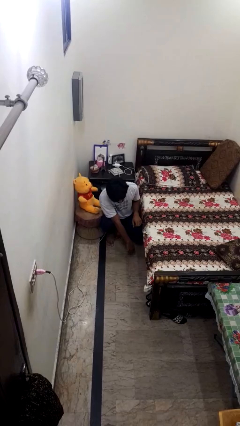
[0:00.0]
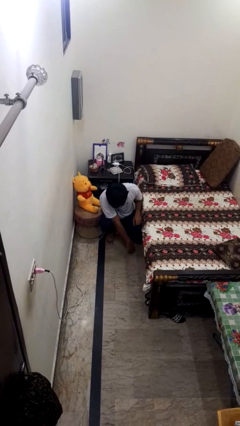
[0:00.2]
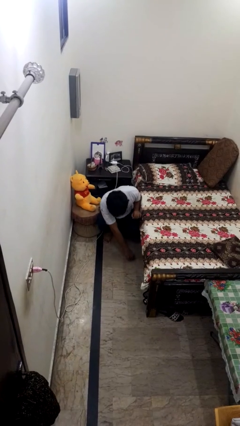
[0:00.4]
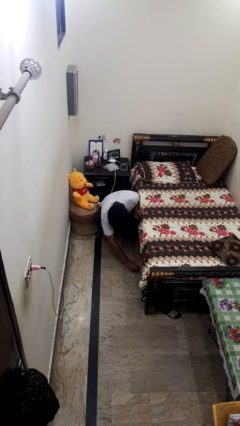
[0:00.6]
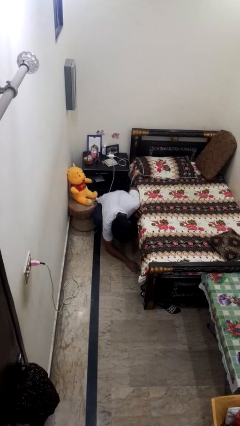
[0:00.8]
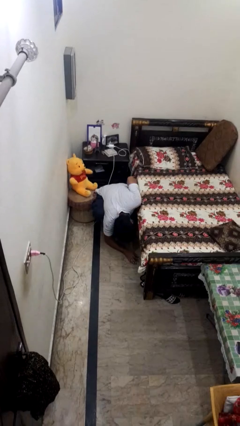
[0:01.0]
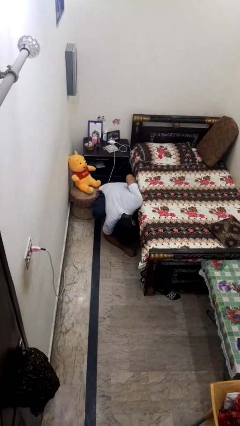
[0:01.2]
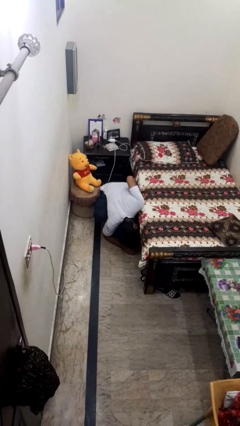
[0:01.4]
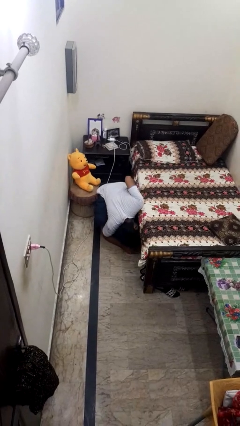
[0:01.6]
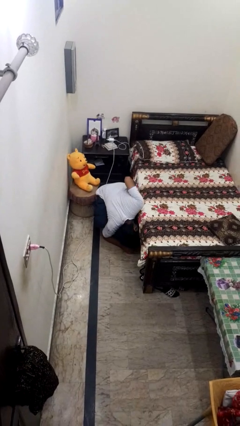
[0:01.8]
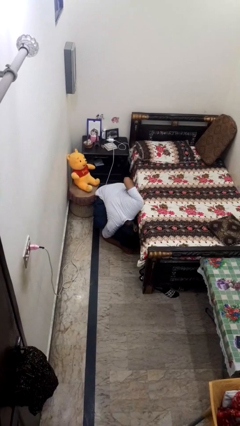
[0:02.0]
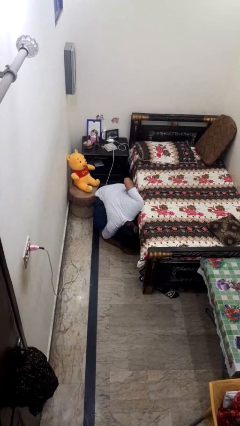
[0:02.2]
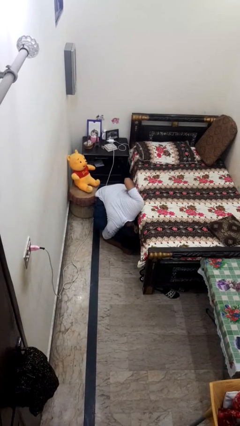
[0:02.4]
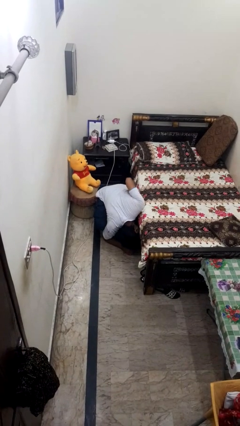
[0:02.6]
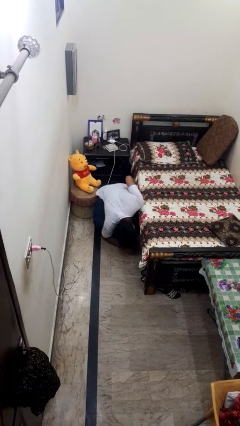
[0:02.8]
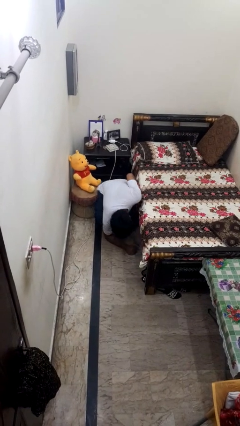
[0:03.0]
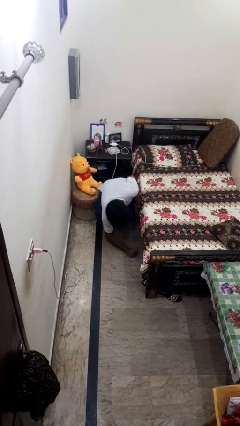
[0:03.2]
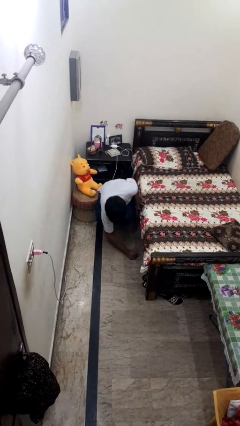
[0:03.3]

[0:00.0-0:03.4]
person searches under bed

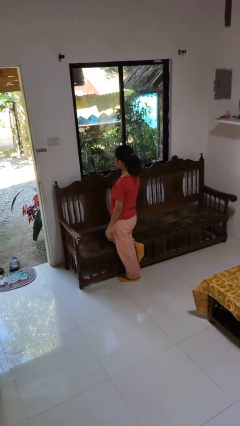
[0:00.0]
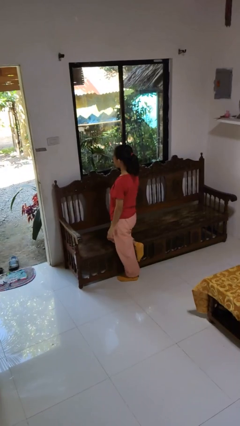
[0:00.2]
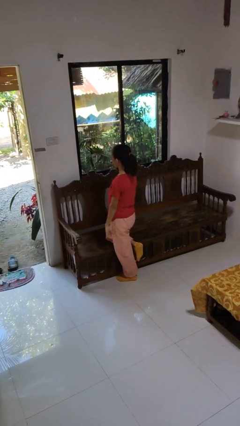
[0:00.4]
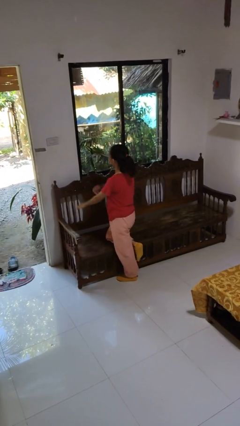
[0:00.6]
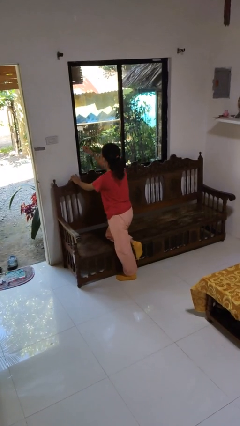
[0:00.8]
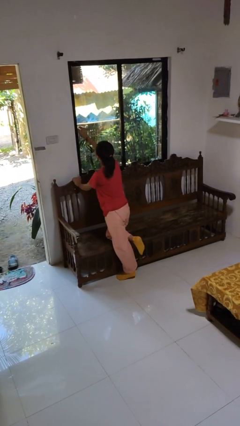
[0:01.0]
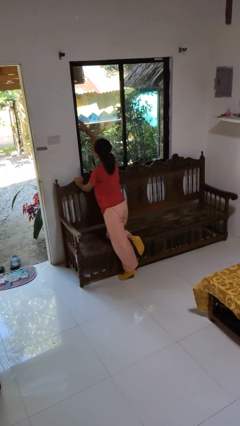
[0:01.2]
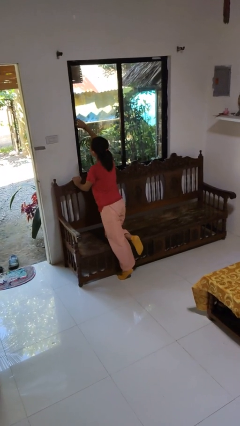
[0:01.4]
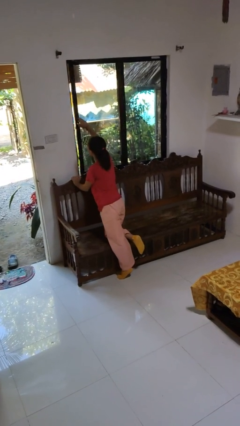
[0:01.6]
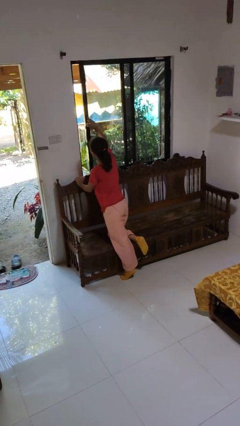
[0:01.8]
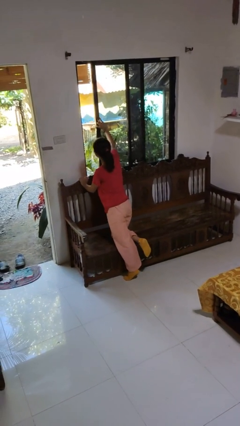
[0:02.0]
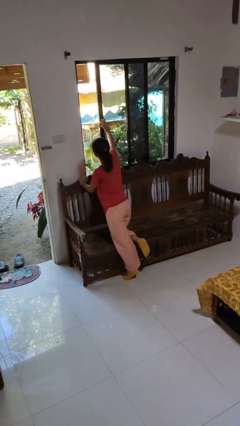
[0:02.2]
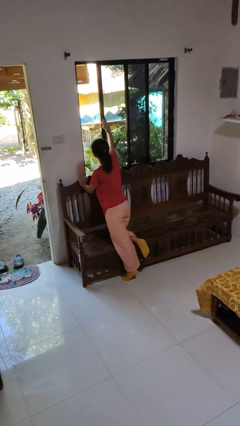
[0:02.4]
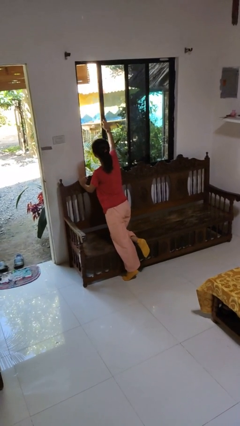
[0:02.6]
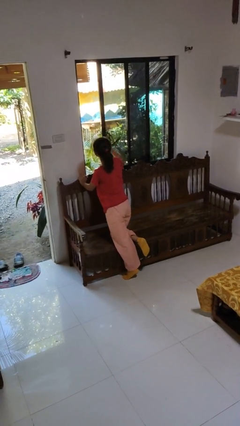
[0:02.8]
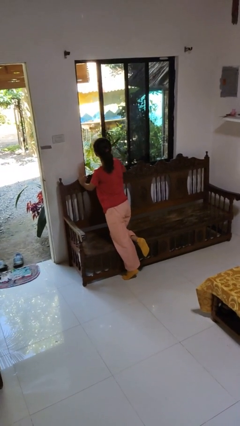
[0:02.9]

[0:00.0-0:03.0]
person opens home window

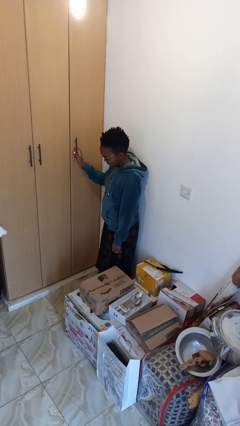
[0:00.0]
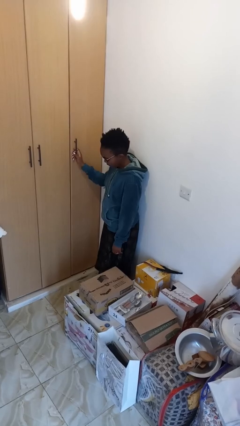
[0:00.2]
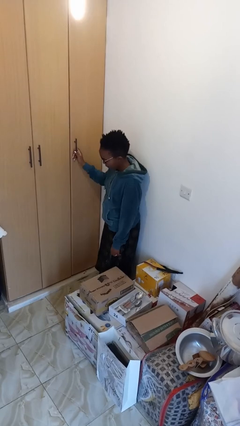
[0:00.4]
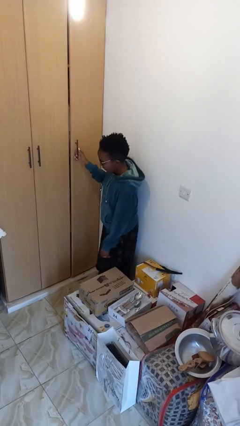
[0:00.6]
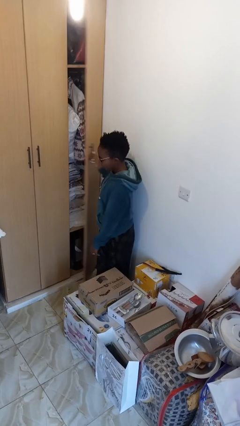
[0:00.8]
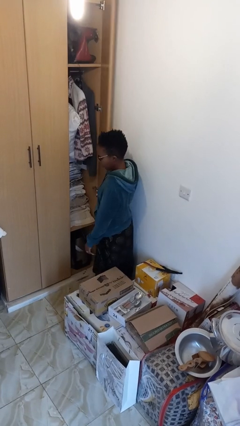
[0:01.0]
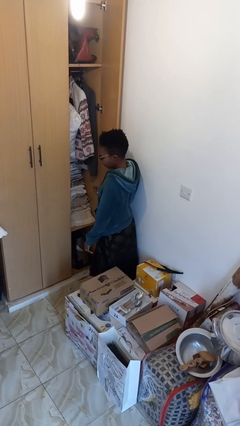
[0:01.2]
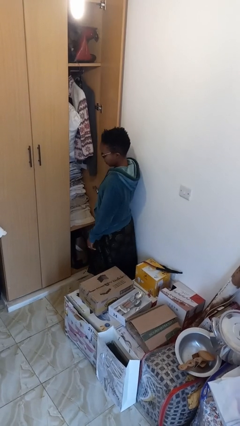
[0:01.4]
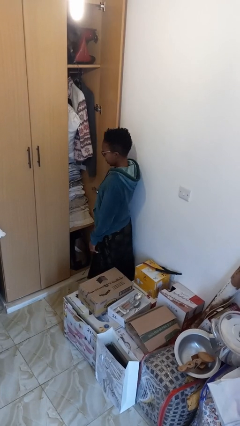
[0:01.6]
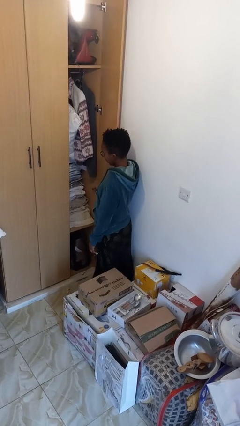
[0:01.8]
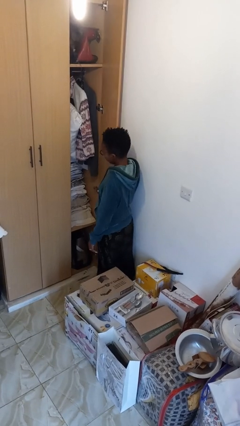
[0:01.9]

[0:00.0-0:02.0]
person opens closet door

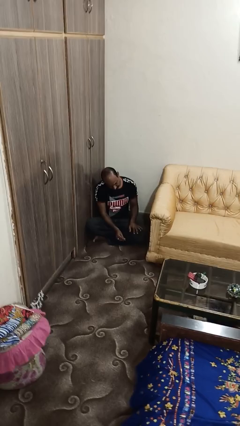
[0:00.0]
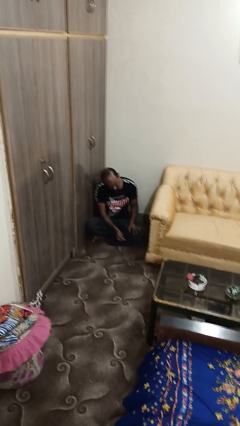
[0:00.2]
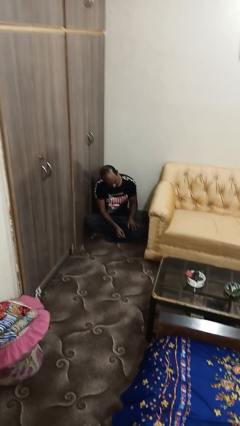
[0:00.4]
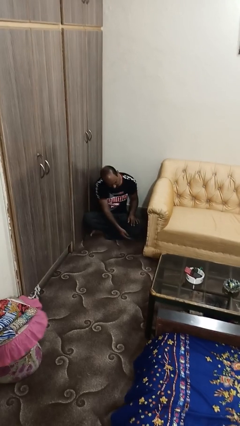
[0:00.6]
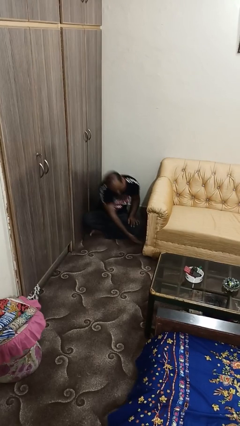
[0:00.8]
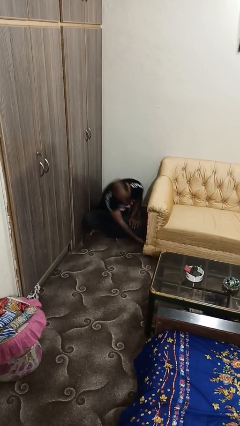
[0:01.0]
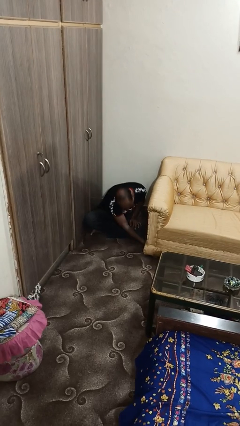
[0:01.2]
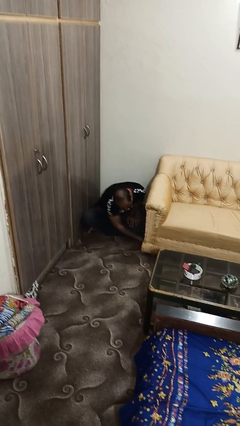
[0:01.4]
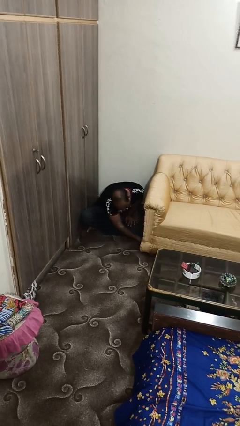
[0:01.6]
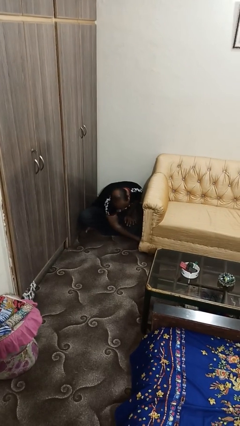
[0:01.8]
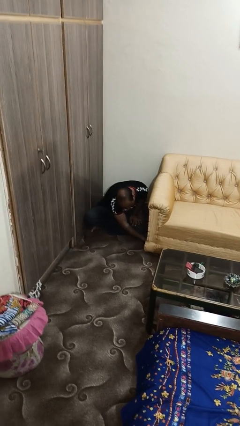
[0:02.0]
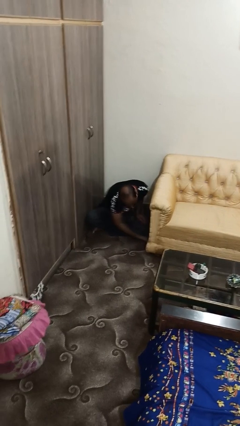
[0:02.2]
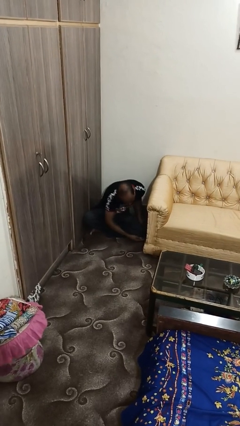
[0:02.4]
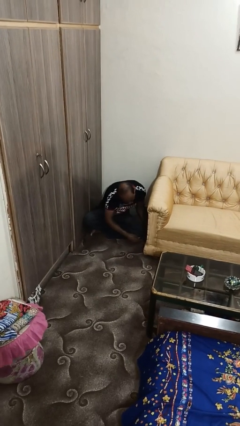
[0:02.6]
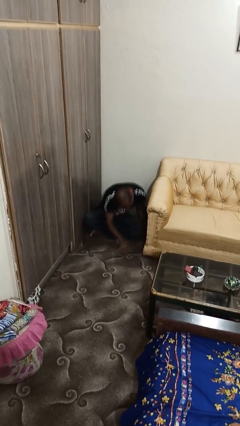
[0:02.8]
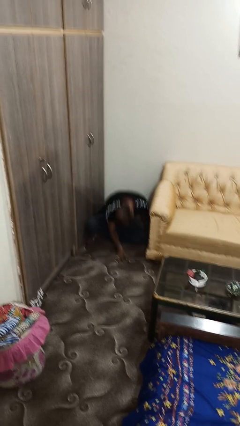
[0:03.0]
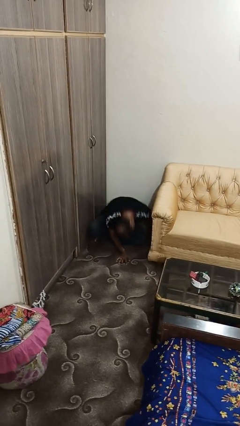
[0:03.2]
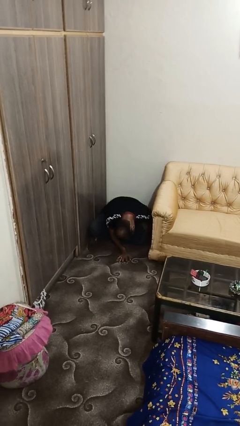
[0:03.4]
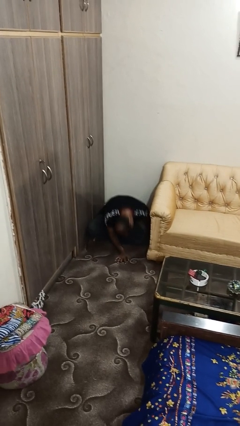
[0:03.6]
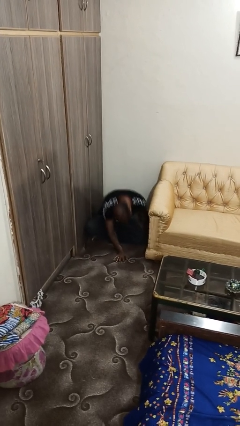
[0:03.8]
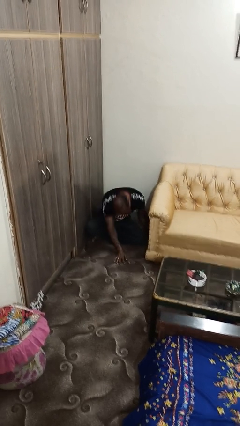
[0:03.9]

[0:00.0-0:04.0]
person searches under couch

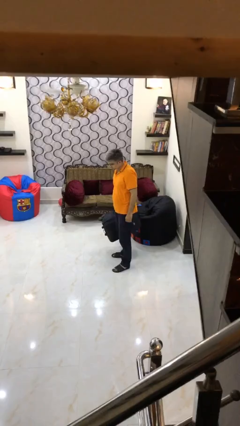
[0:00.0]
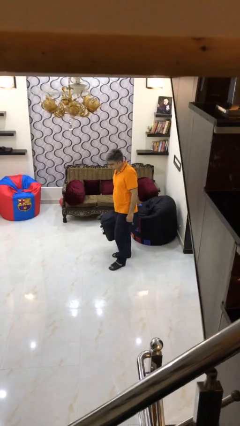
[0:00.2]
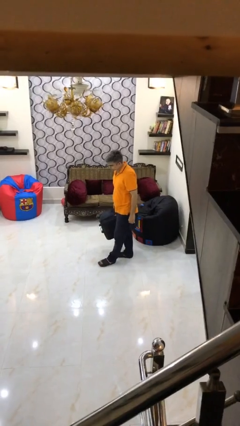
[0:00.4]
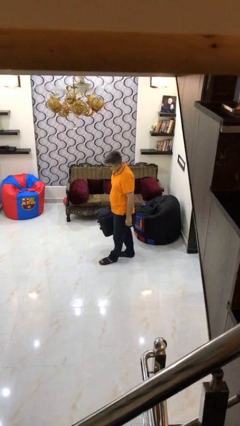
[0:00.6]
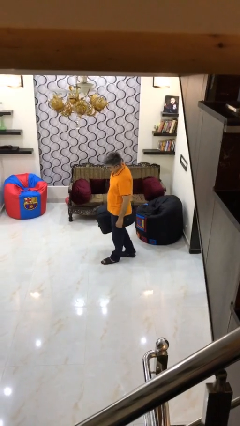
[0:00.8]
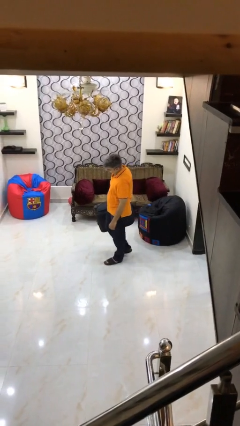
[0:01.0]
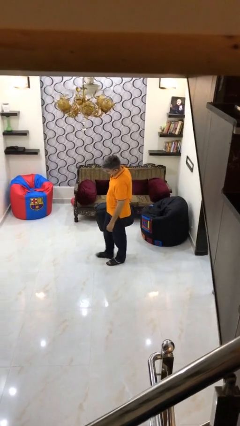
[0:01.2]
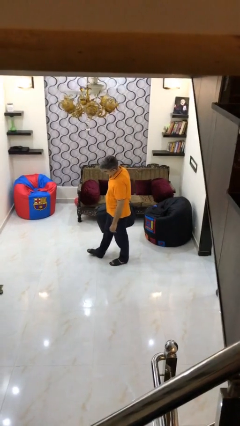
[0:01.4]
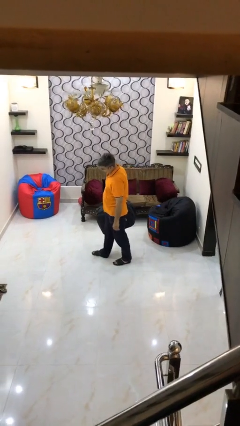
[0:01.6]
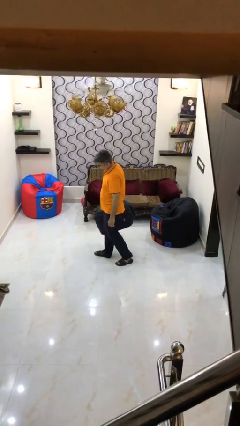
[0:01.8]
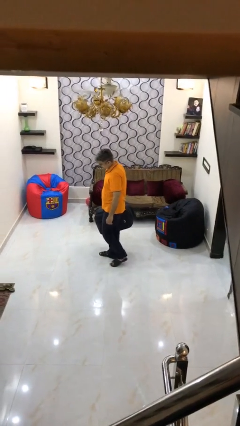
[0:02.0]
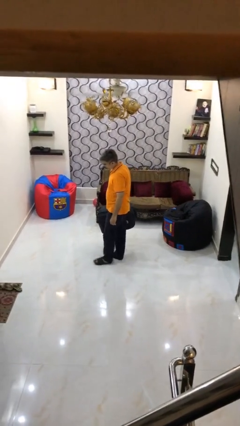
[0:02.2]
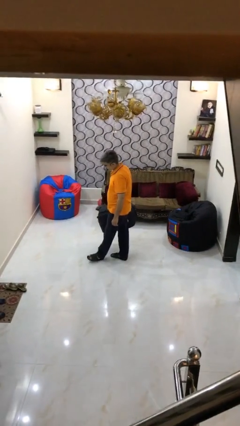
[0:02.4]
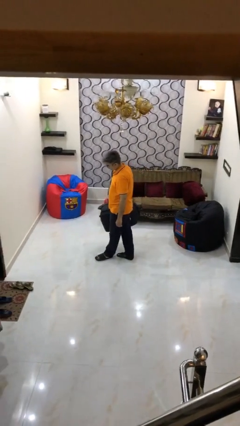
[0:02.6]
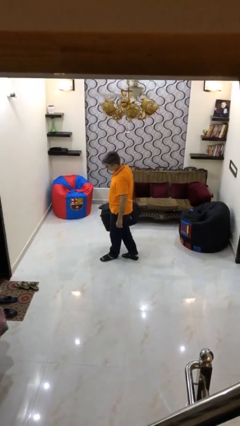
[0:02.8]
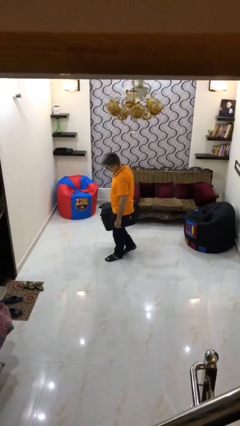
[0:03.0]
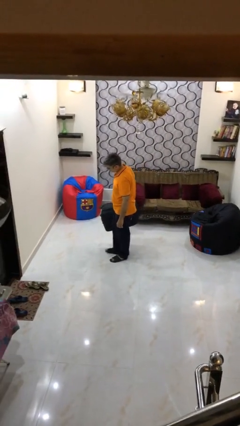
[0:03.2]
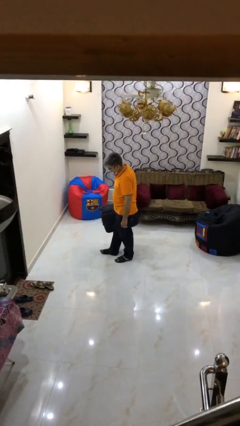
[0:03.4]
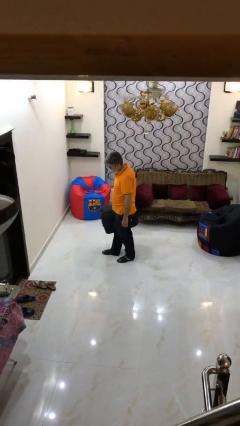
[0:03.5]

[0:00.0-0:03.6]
person carries heavy object

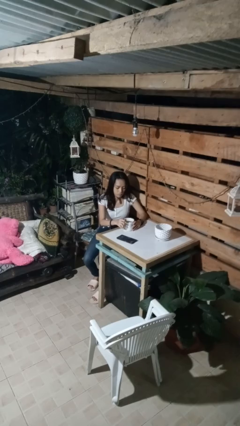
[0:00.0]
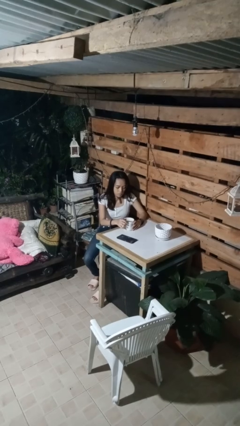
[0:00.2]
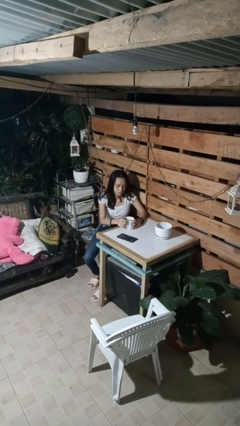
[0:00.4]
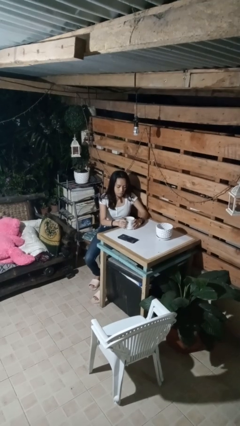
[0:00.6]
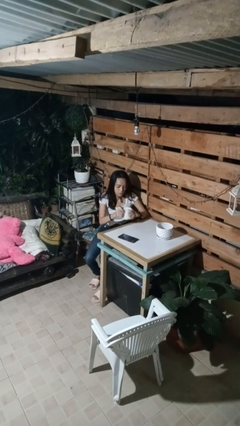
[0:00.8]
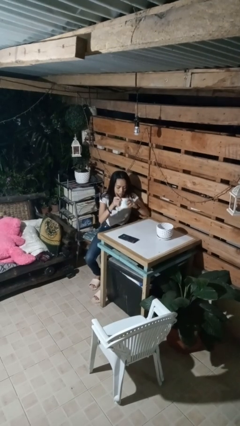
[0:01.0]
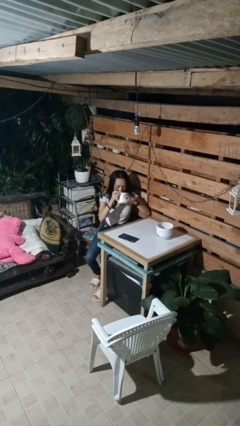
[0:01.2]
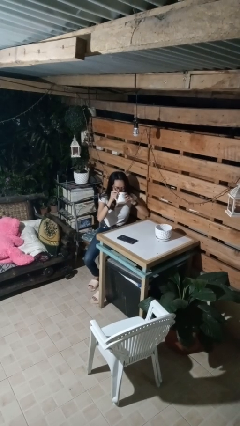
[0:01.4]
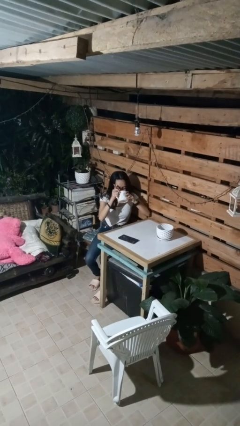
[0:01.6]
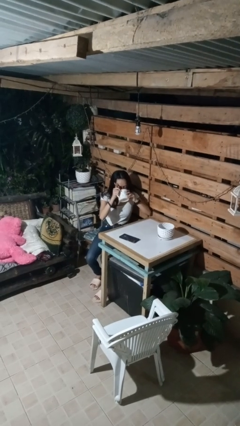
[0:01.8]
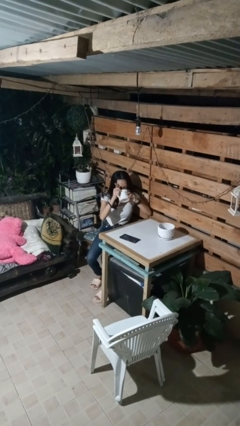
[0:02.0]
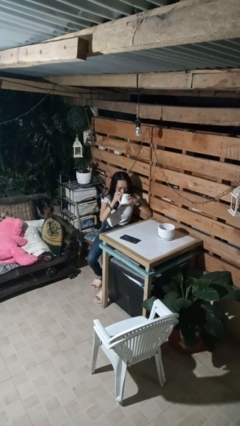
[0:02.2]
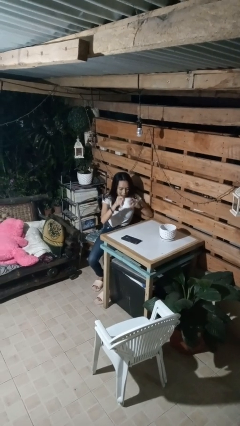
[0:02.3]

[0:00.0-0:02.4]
person drinks from mug
